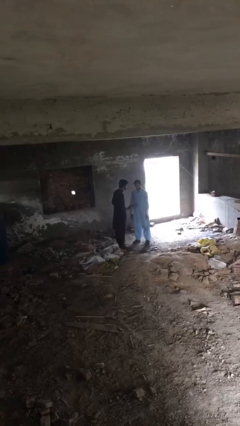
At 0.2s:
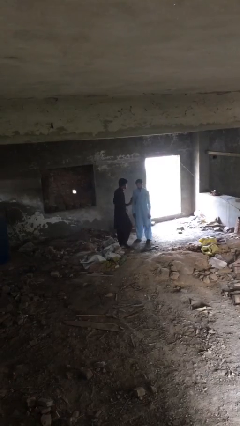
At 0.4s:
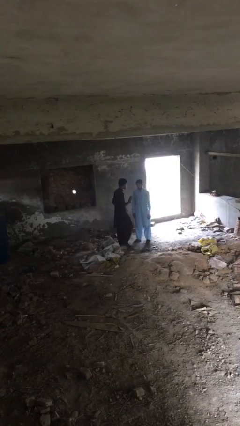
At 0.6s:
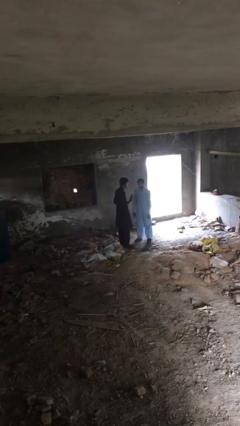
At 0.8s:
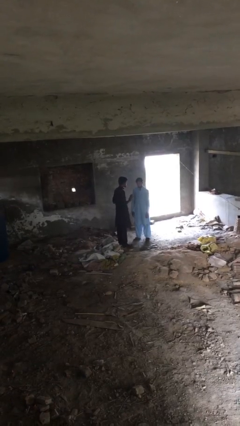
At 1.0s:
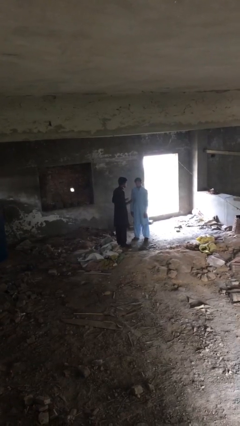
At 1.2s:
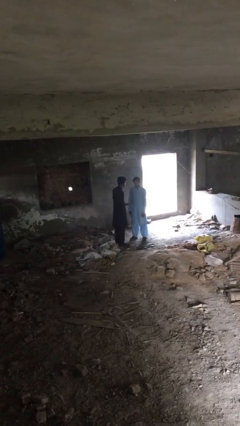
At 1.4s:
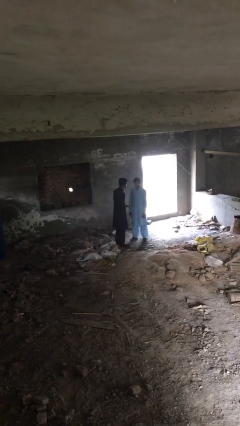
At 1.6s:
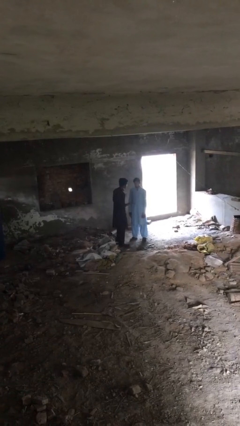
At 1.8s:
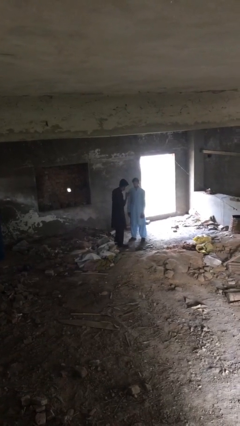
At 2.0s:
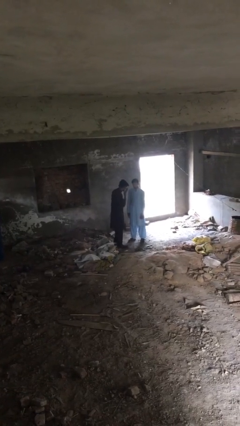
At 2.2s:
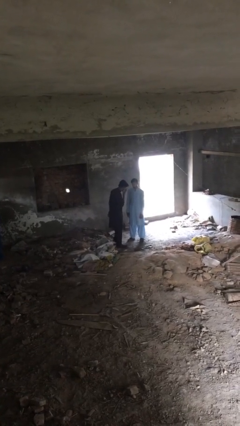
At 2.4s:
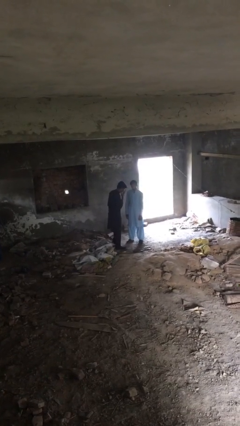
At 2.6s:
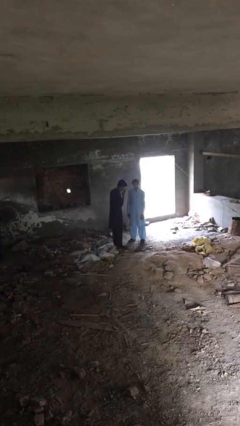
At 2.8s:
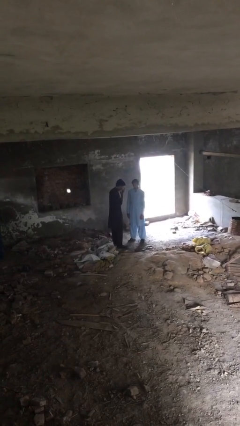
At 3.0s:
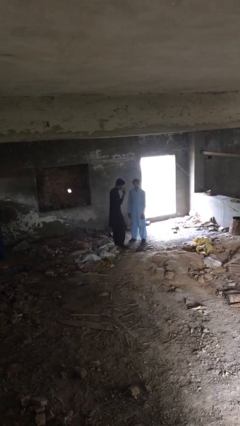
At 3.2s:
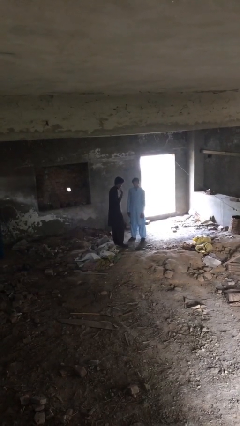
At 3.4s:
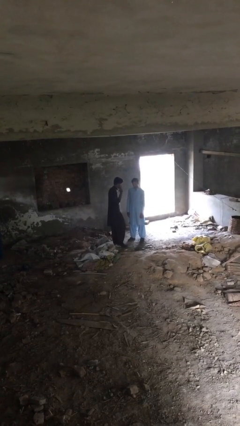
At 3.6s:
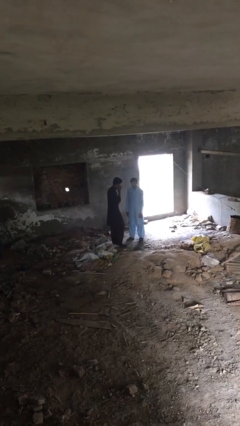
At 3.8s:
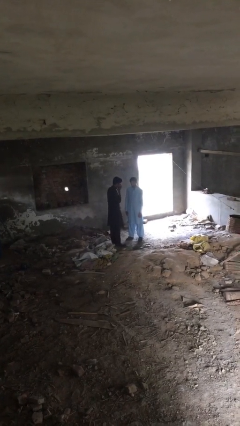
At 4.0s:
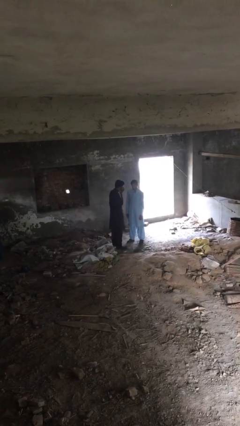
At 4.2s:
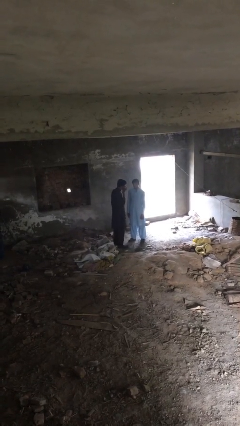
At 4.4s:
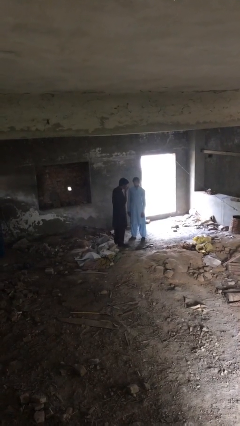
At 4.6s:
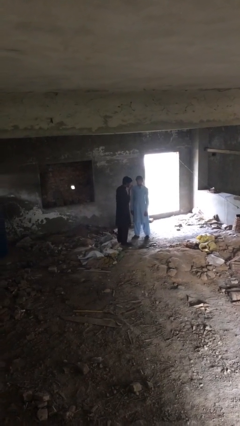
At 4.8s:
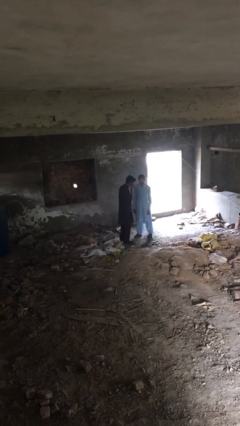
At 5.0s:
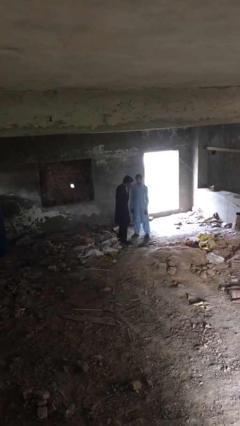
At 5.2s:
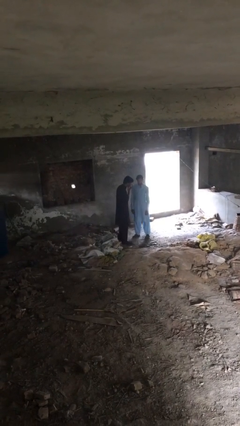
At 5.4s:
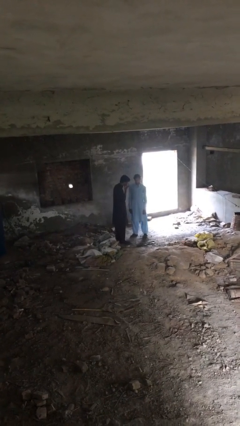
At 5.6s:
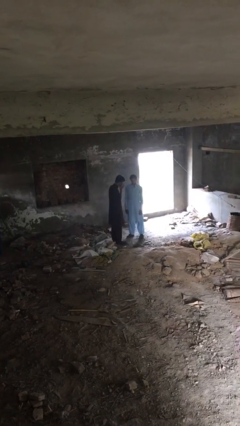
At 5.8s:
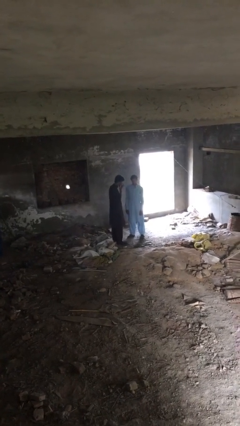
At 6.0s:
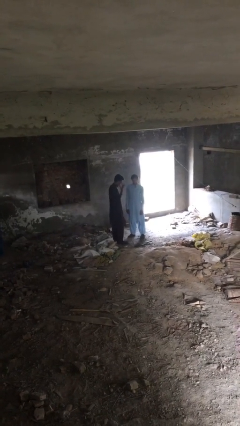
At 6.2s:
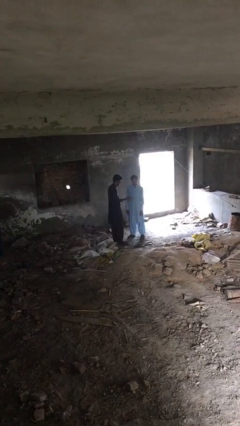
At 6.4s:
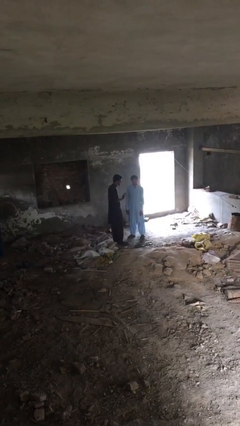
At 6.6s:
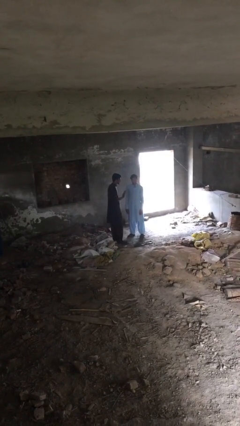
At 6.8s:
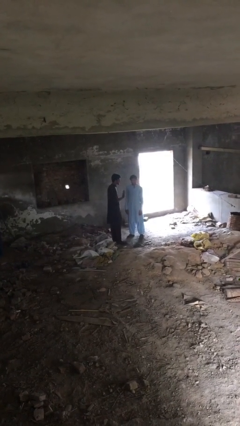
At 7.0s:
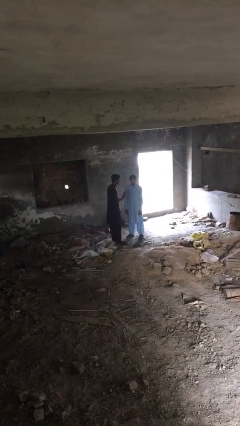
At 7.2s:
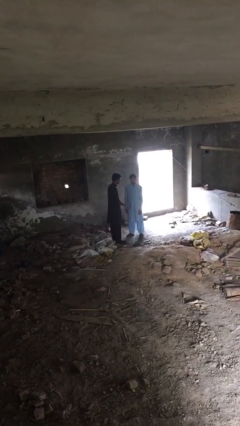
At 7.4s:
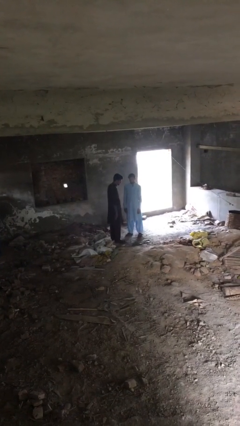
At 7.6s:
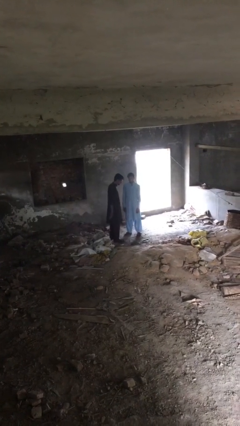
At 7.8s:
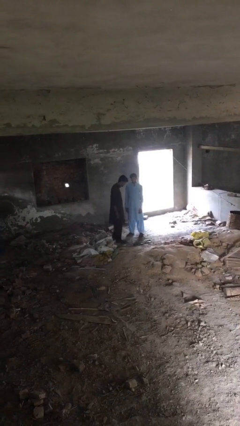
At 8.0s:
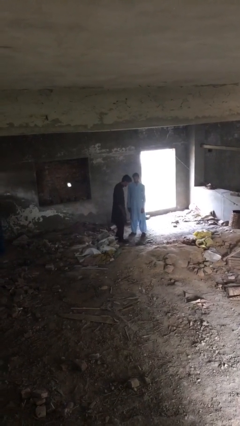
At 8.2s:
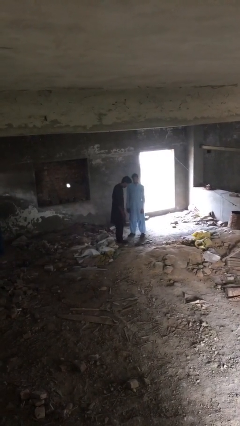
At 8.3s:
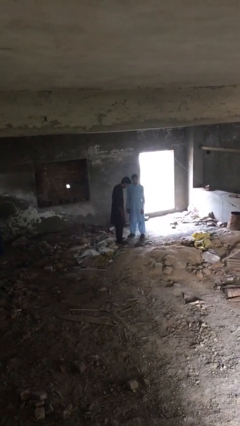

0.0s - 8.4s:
person talks to person

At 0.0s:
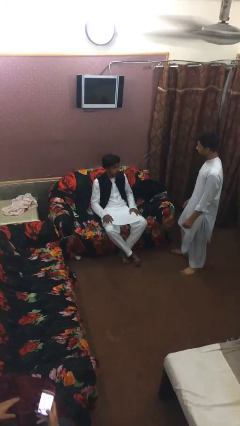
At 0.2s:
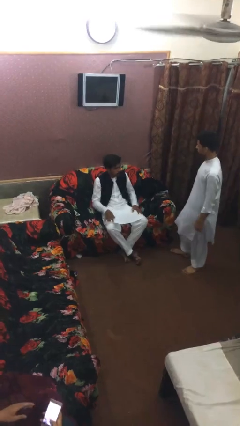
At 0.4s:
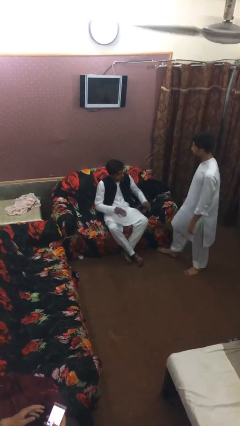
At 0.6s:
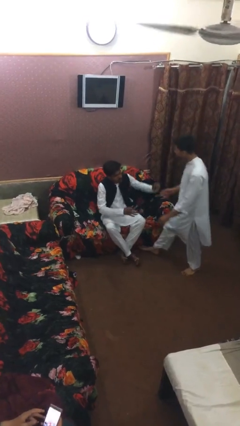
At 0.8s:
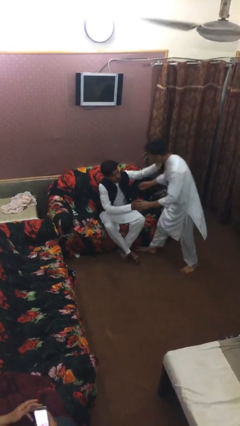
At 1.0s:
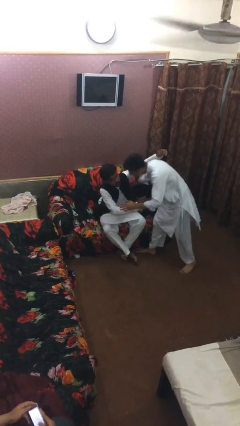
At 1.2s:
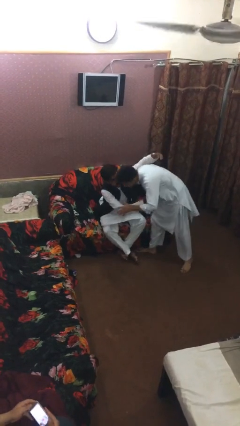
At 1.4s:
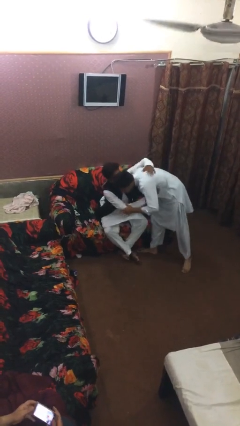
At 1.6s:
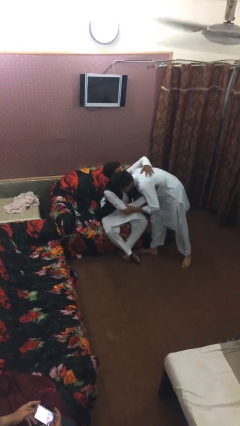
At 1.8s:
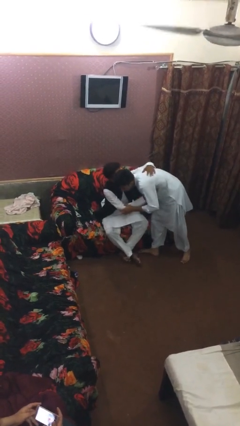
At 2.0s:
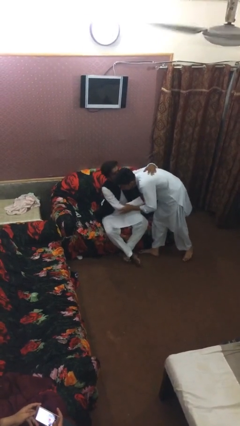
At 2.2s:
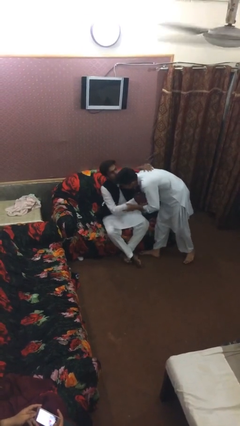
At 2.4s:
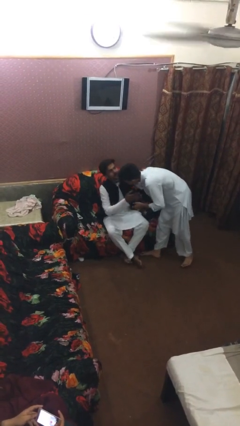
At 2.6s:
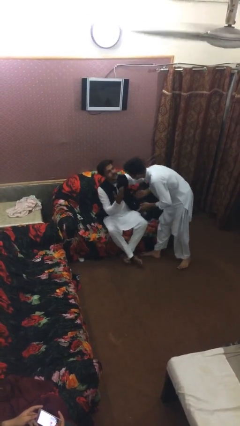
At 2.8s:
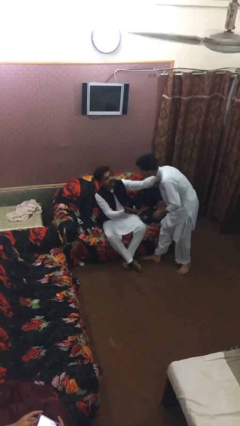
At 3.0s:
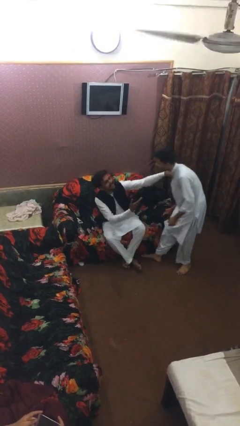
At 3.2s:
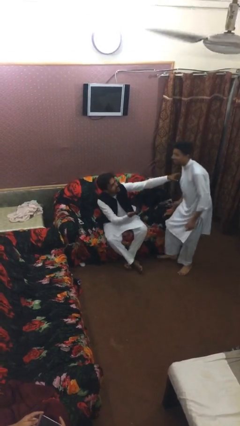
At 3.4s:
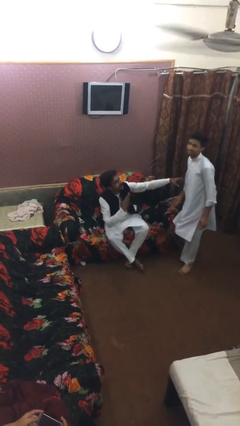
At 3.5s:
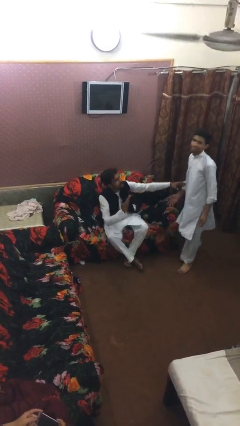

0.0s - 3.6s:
person embraces person

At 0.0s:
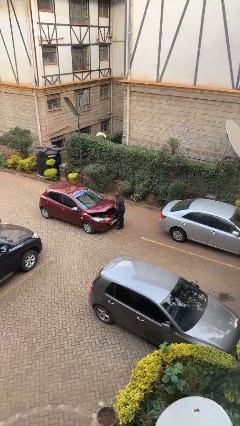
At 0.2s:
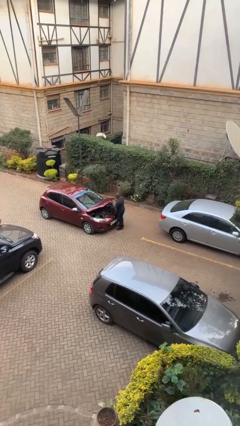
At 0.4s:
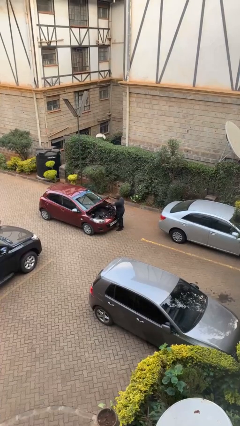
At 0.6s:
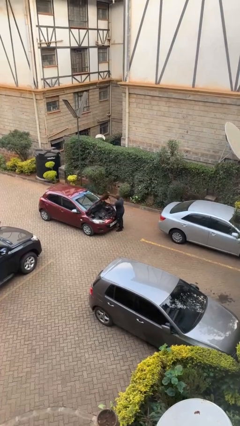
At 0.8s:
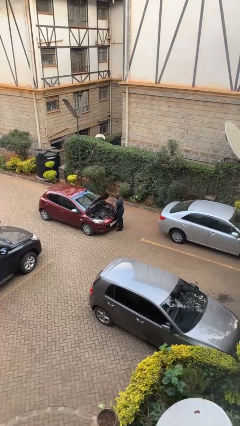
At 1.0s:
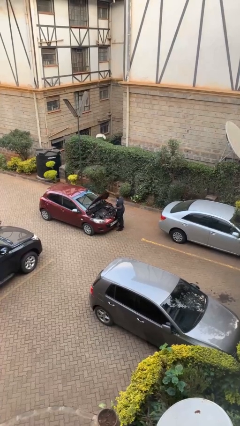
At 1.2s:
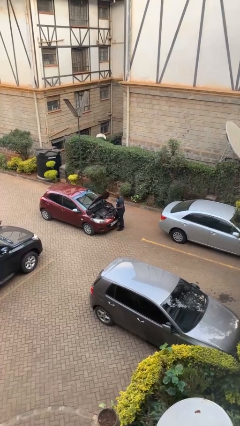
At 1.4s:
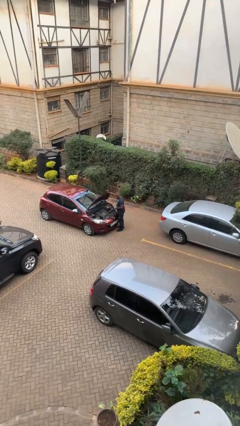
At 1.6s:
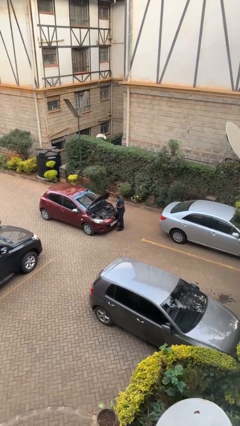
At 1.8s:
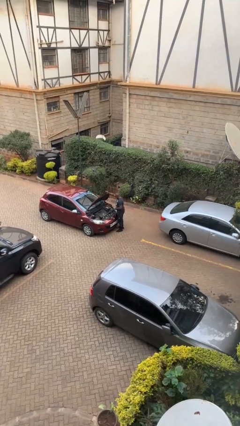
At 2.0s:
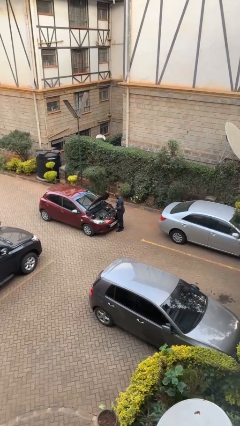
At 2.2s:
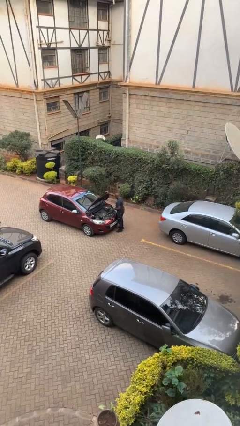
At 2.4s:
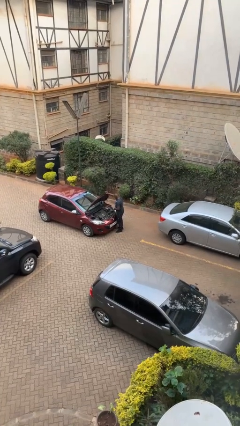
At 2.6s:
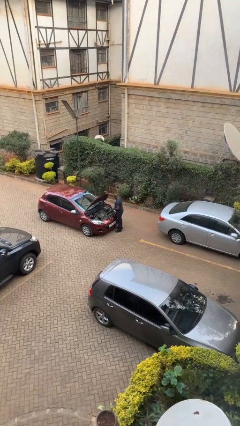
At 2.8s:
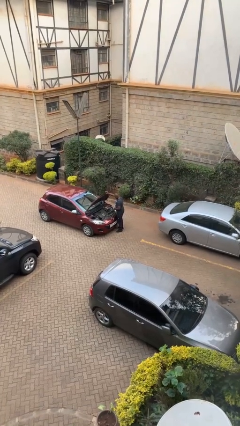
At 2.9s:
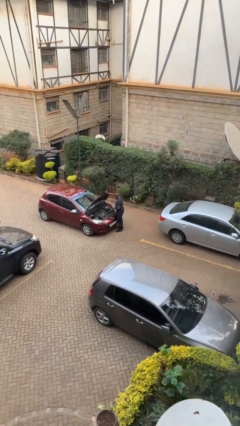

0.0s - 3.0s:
person opens car hood

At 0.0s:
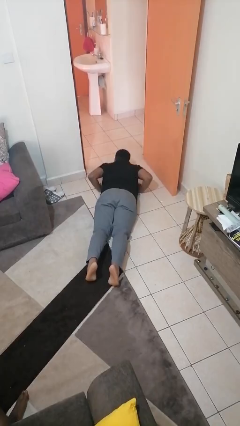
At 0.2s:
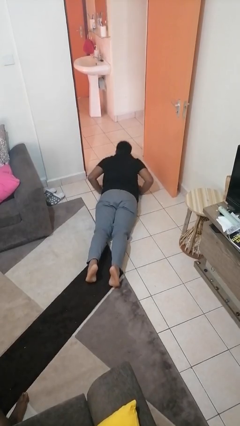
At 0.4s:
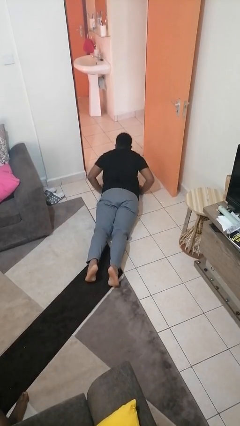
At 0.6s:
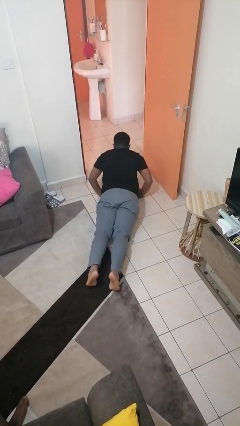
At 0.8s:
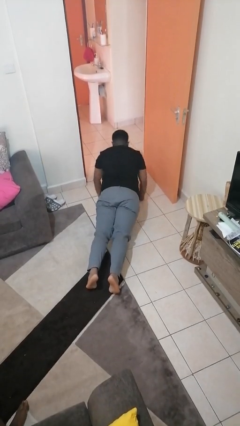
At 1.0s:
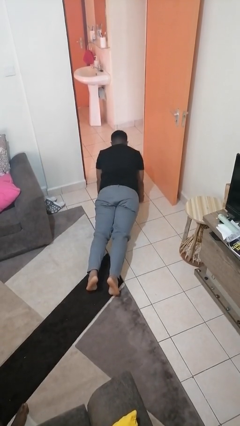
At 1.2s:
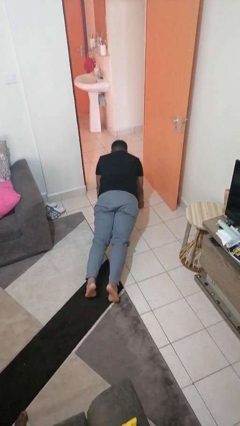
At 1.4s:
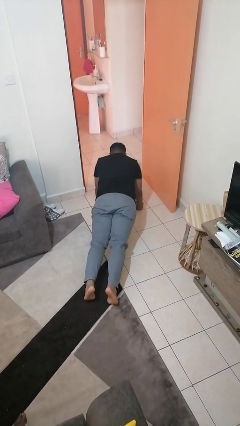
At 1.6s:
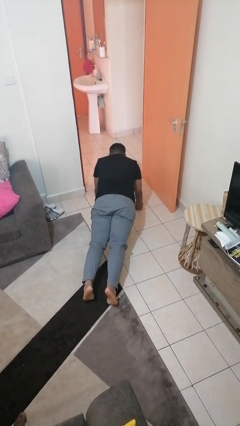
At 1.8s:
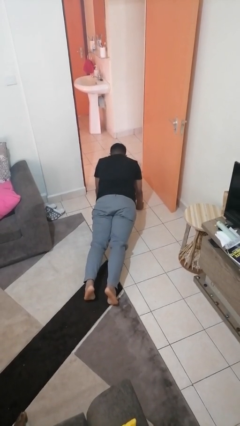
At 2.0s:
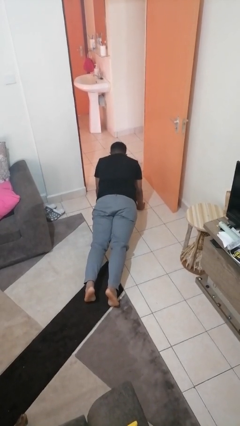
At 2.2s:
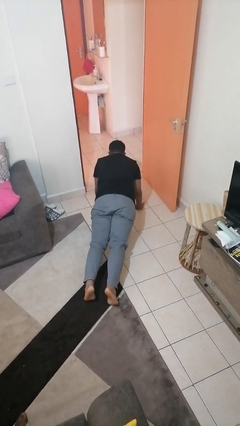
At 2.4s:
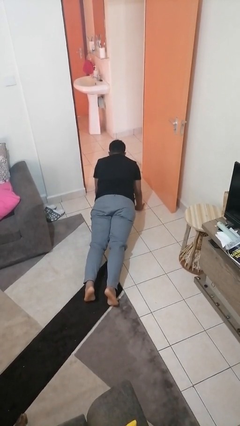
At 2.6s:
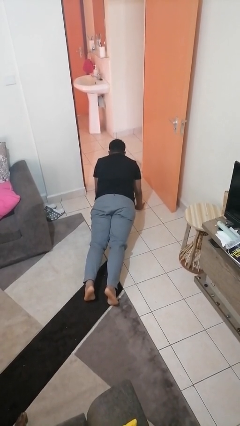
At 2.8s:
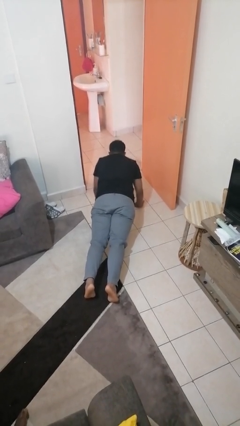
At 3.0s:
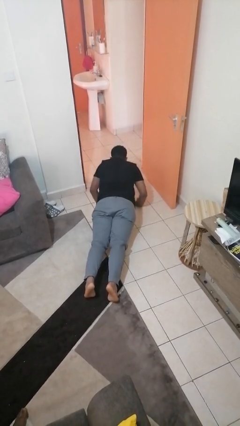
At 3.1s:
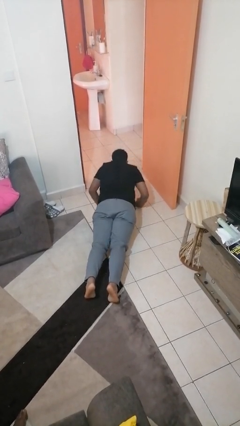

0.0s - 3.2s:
person exercises with pushup
